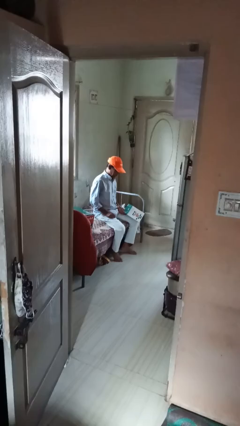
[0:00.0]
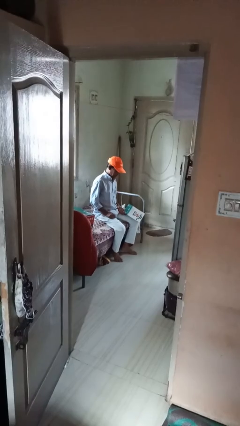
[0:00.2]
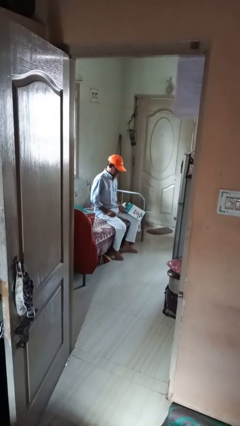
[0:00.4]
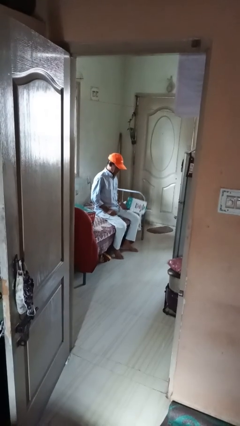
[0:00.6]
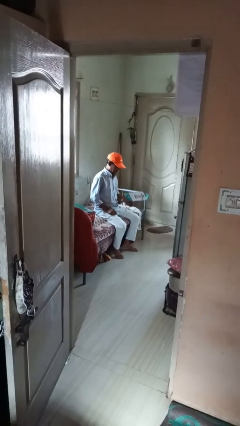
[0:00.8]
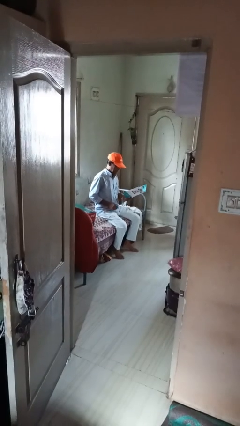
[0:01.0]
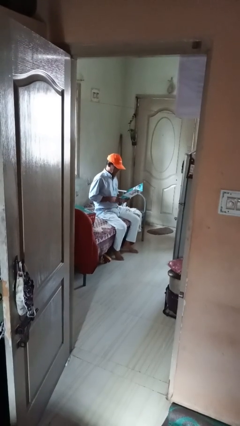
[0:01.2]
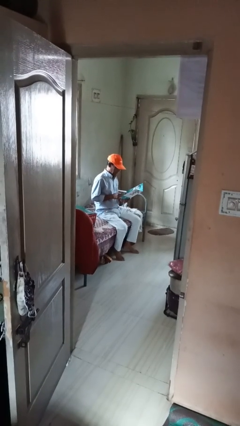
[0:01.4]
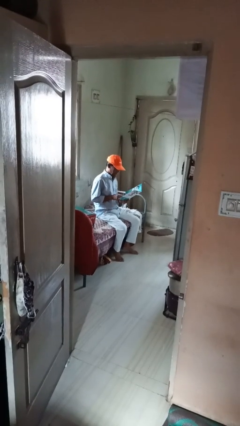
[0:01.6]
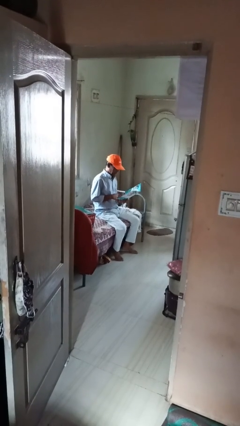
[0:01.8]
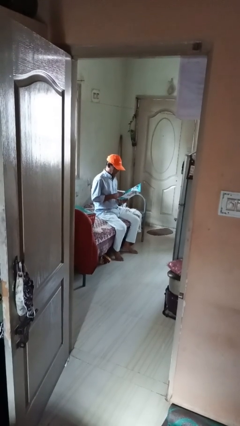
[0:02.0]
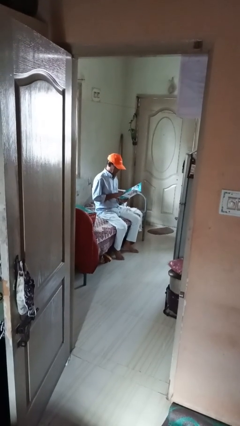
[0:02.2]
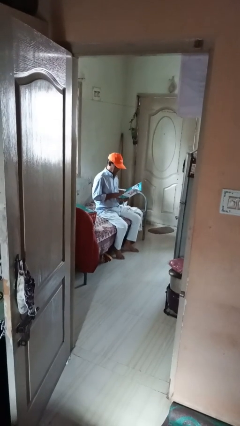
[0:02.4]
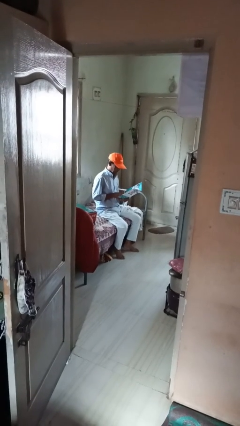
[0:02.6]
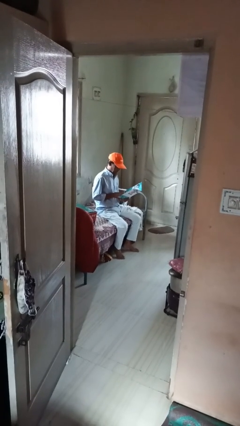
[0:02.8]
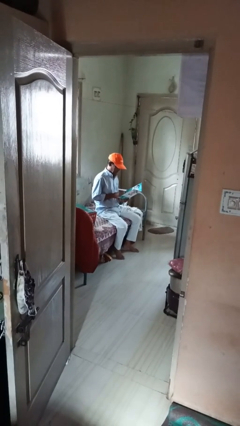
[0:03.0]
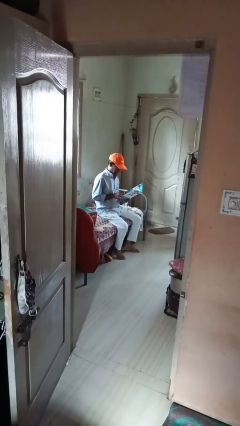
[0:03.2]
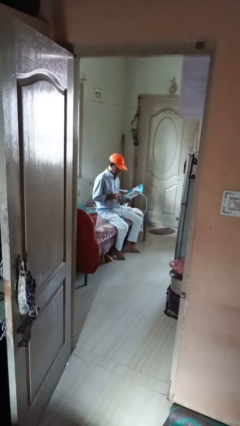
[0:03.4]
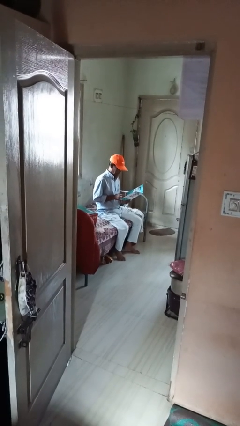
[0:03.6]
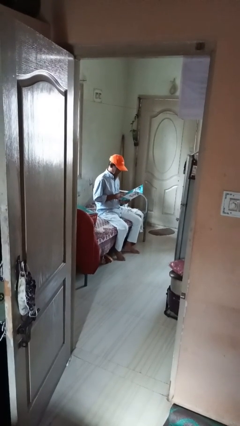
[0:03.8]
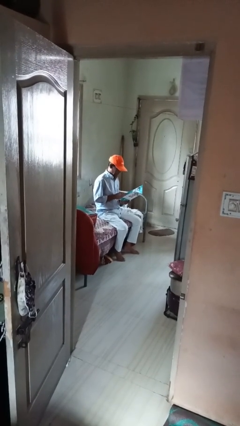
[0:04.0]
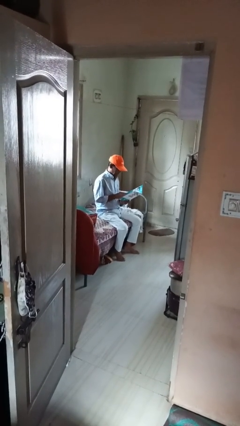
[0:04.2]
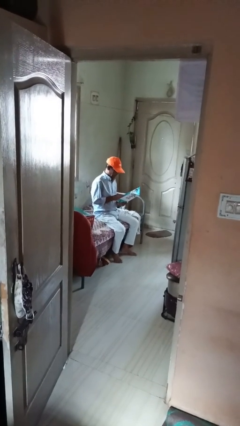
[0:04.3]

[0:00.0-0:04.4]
person reads magazine

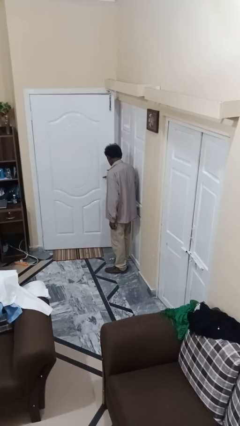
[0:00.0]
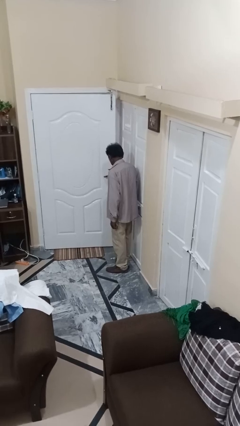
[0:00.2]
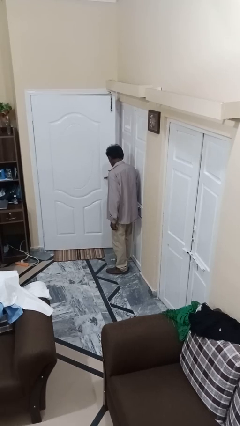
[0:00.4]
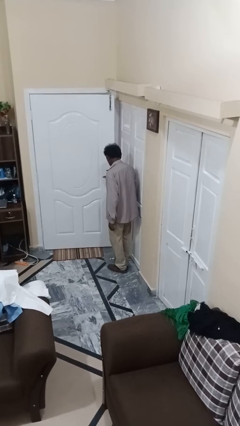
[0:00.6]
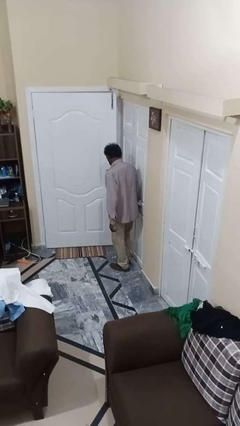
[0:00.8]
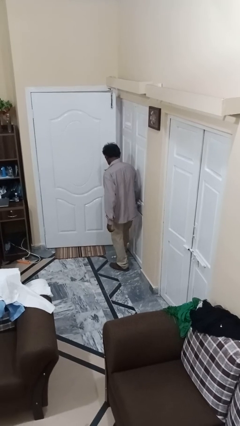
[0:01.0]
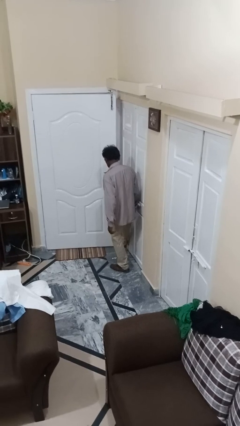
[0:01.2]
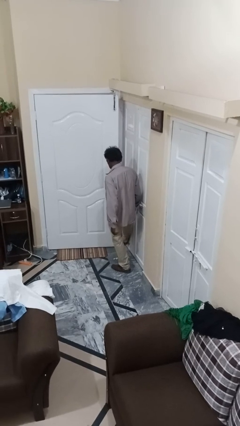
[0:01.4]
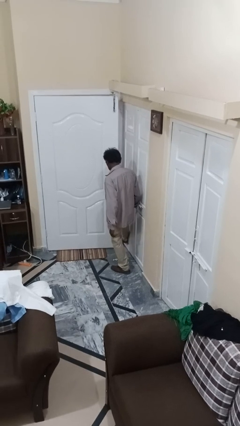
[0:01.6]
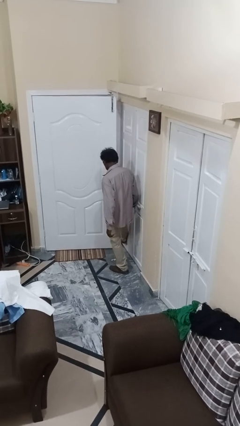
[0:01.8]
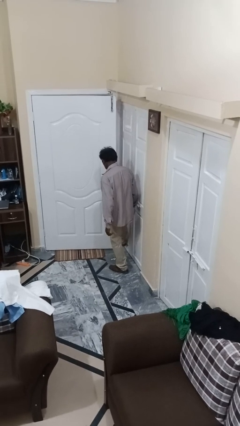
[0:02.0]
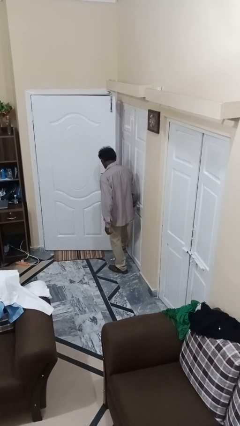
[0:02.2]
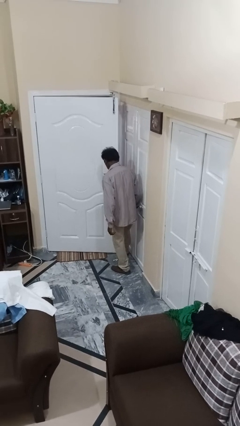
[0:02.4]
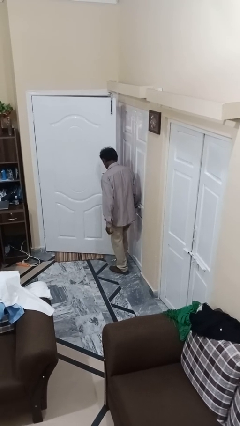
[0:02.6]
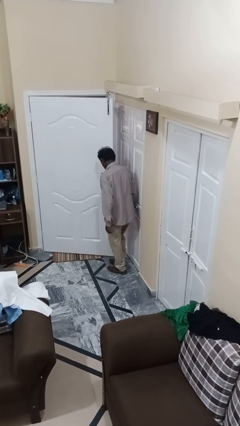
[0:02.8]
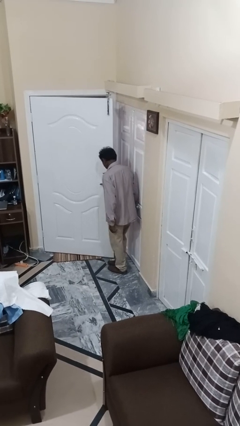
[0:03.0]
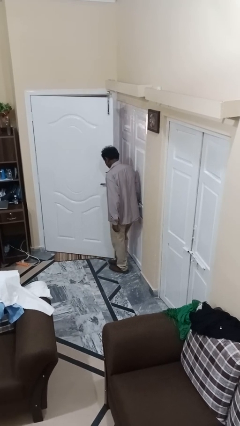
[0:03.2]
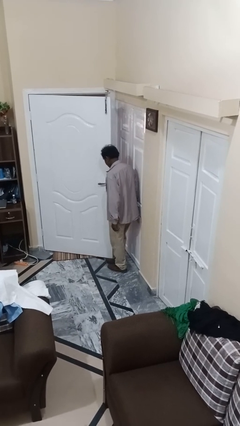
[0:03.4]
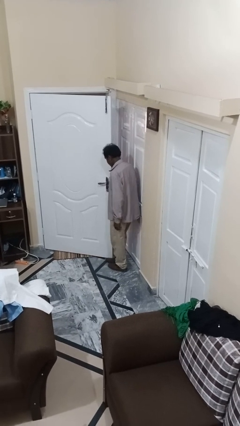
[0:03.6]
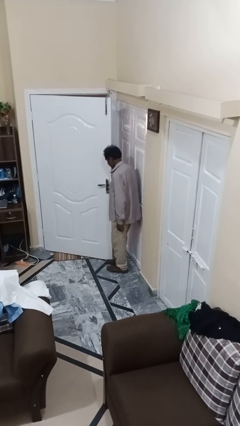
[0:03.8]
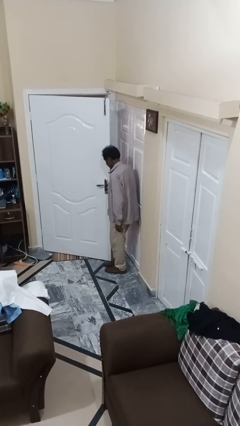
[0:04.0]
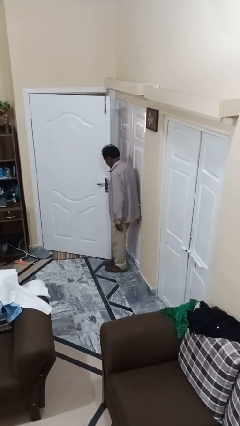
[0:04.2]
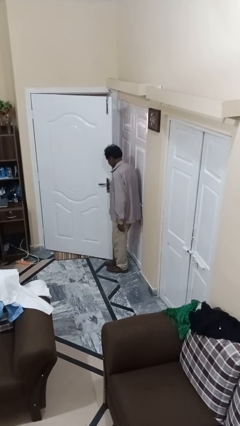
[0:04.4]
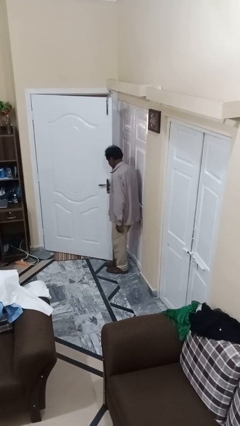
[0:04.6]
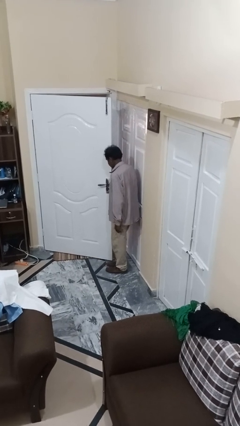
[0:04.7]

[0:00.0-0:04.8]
person opens facility door

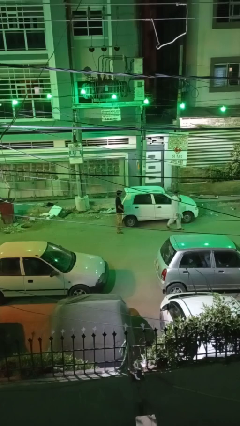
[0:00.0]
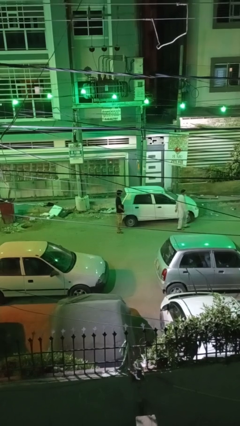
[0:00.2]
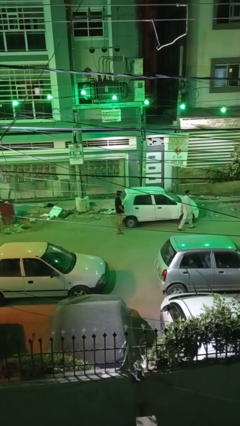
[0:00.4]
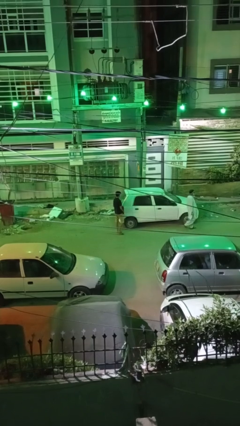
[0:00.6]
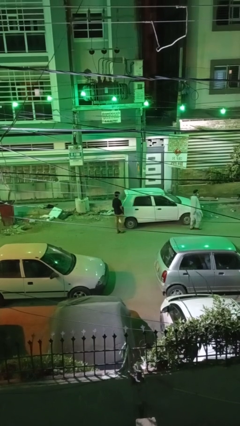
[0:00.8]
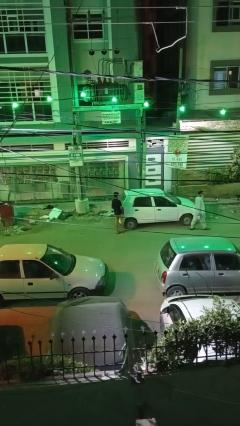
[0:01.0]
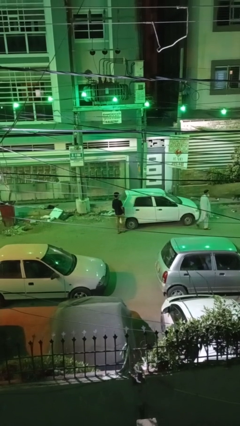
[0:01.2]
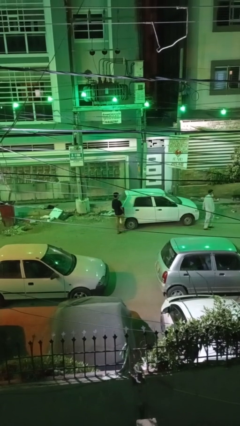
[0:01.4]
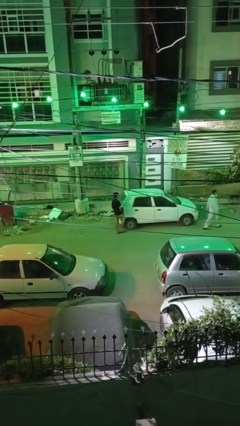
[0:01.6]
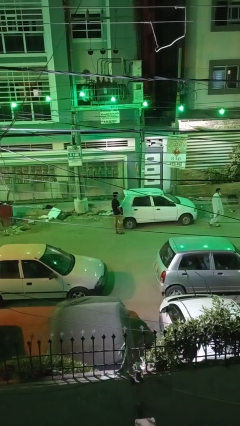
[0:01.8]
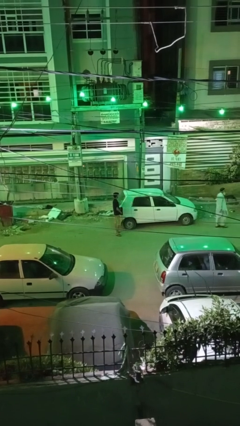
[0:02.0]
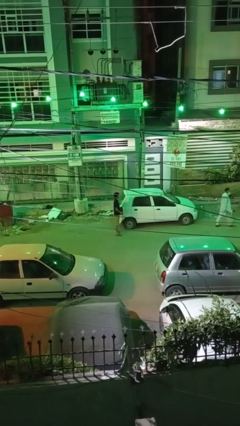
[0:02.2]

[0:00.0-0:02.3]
person kicks car tires

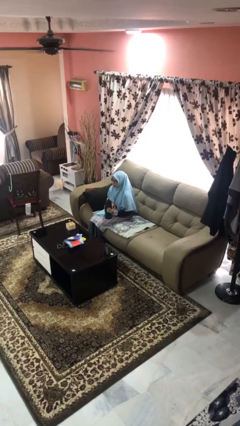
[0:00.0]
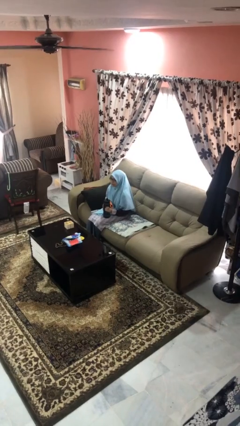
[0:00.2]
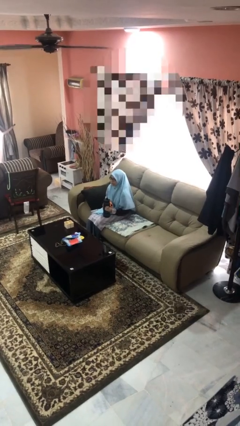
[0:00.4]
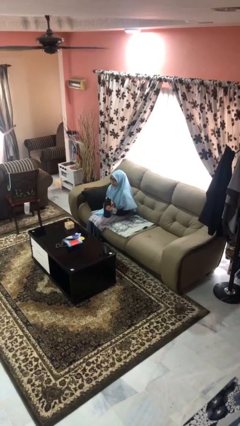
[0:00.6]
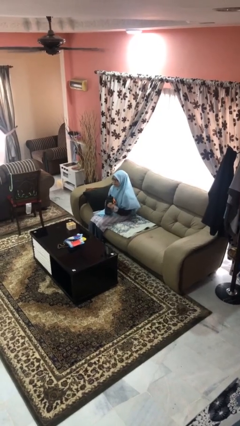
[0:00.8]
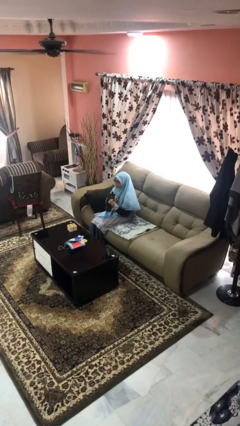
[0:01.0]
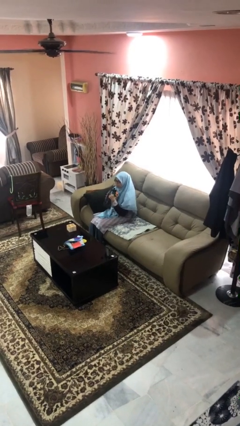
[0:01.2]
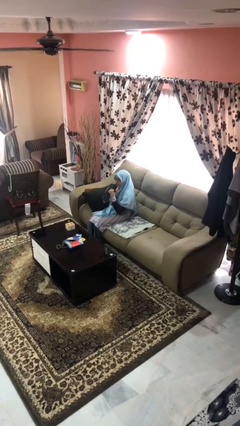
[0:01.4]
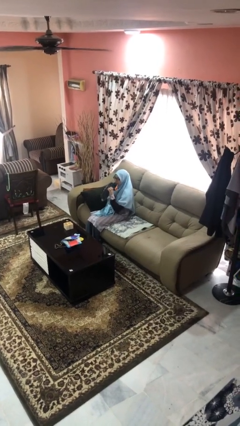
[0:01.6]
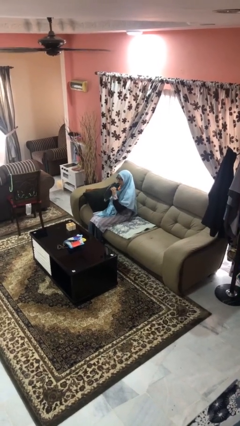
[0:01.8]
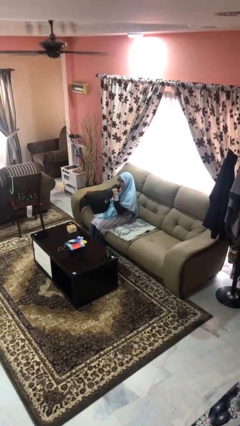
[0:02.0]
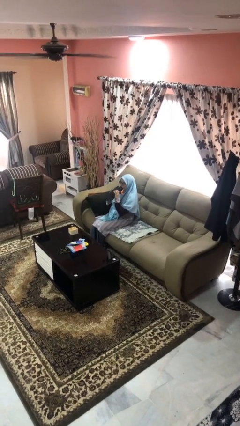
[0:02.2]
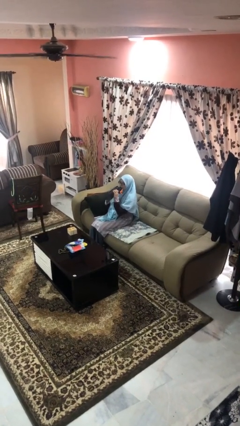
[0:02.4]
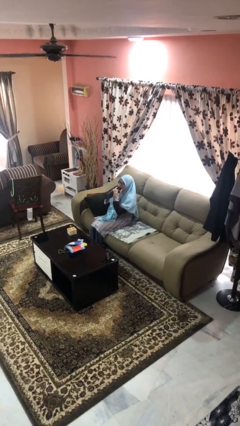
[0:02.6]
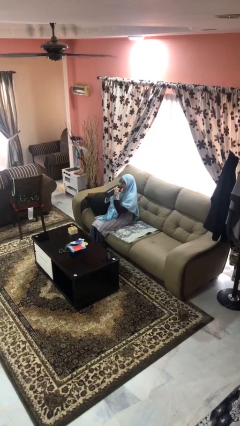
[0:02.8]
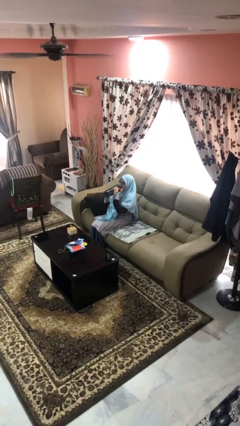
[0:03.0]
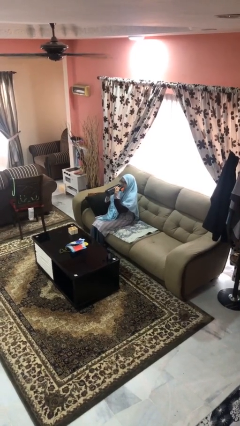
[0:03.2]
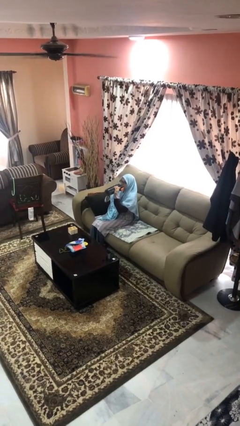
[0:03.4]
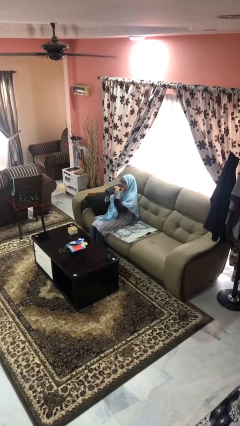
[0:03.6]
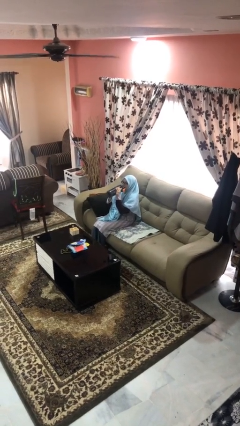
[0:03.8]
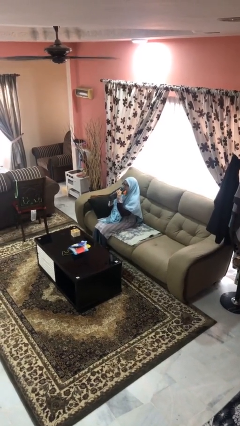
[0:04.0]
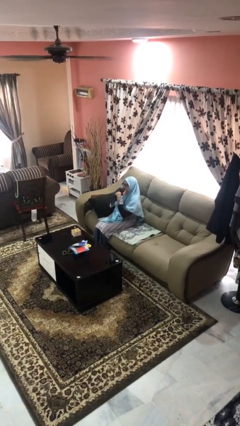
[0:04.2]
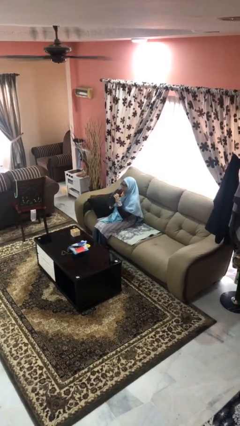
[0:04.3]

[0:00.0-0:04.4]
person drinks from bottle

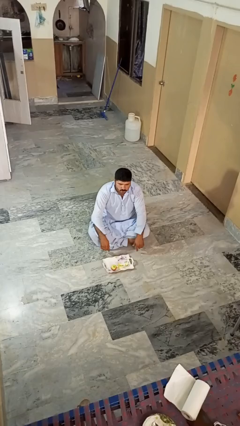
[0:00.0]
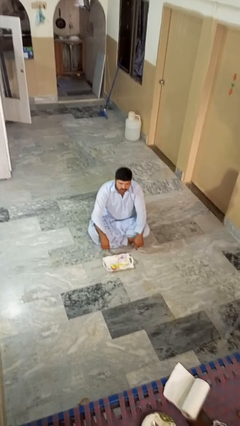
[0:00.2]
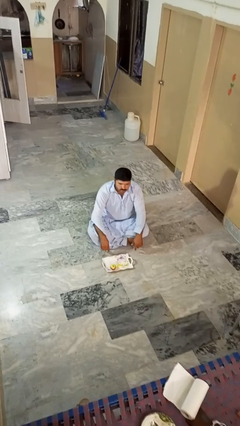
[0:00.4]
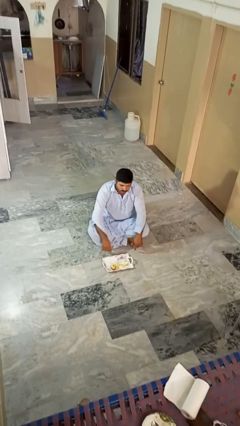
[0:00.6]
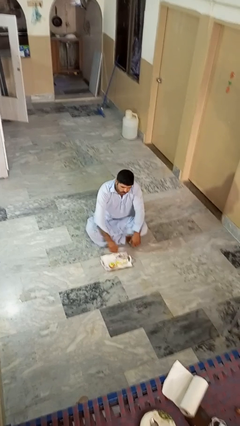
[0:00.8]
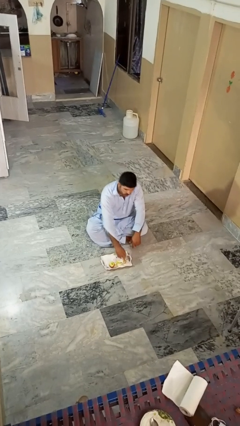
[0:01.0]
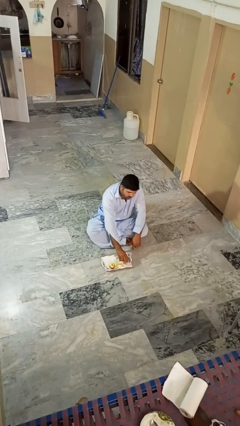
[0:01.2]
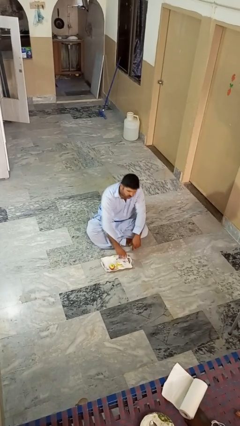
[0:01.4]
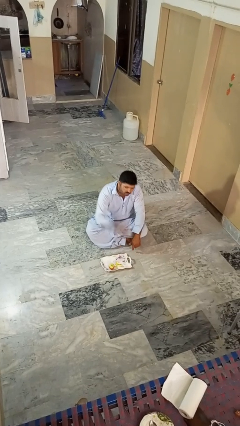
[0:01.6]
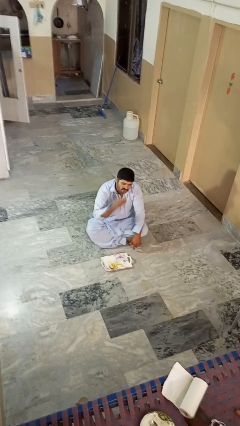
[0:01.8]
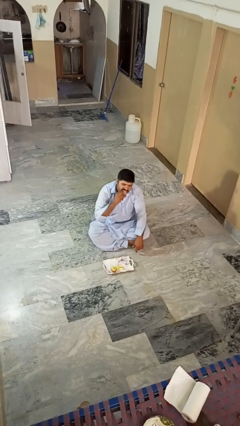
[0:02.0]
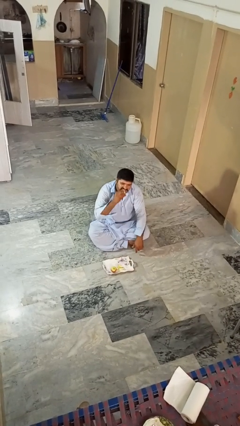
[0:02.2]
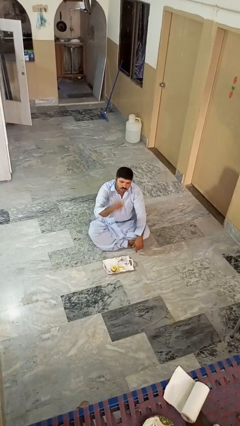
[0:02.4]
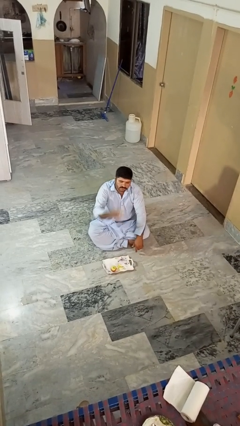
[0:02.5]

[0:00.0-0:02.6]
person eats apple
